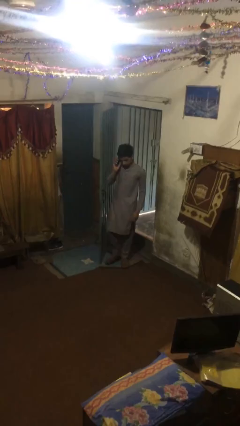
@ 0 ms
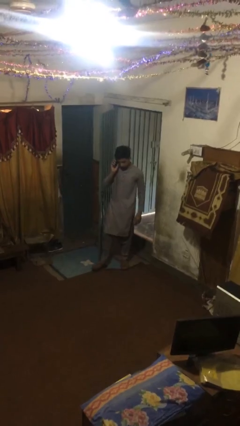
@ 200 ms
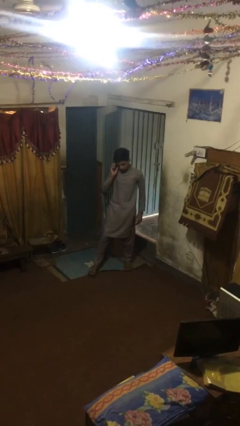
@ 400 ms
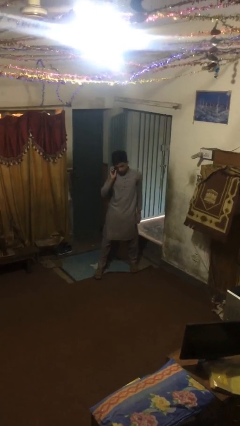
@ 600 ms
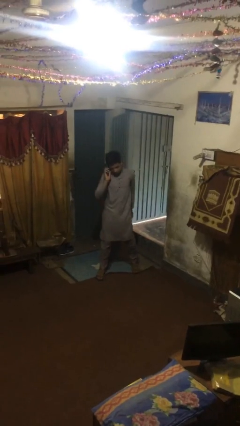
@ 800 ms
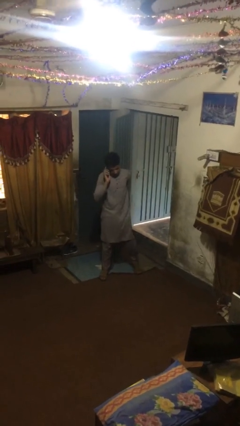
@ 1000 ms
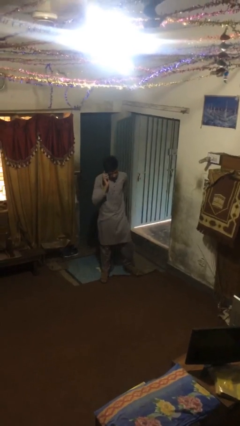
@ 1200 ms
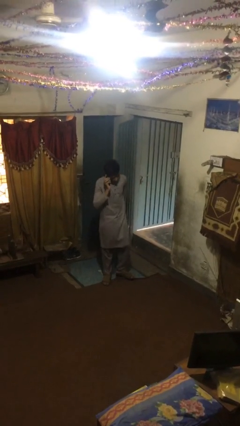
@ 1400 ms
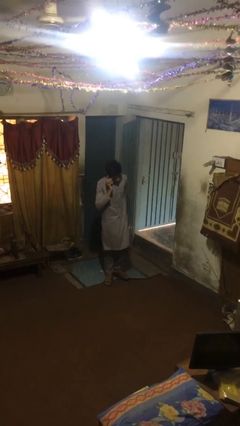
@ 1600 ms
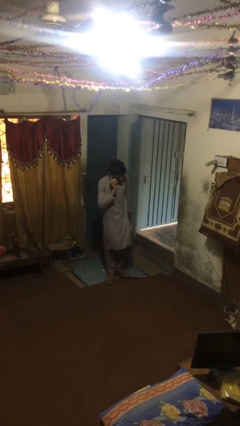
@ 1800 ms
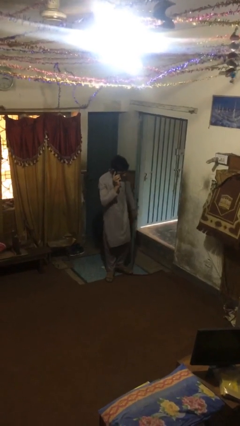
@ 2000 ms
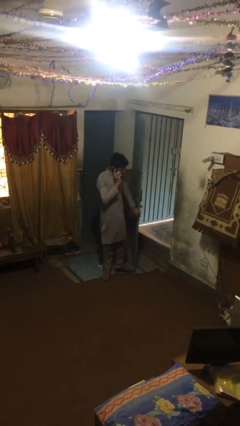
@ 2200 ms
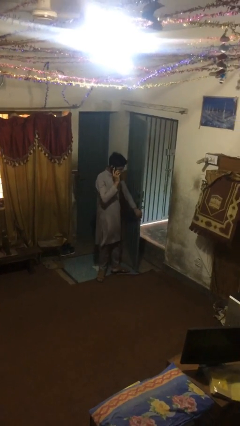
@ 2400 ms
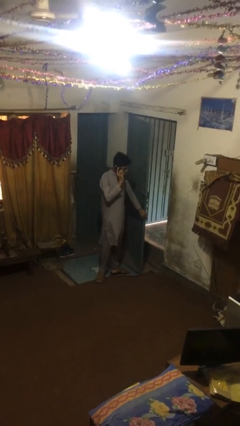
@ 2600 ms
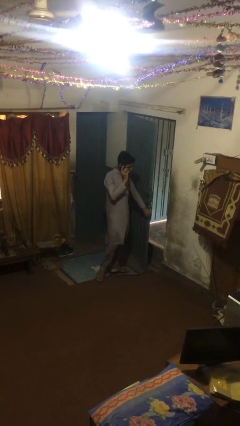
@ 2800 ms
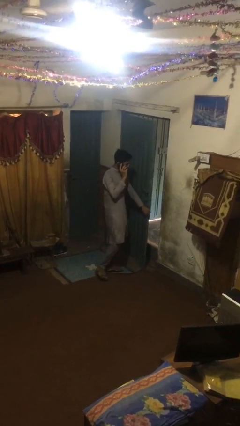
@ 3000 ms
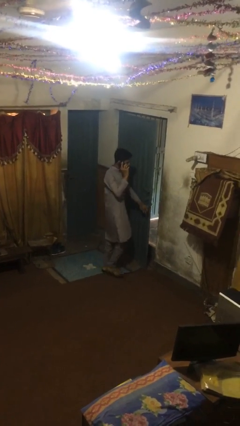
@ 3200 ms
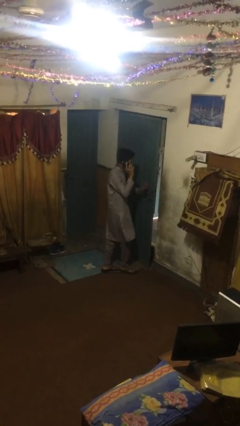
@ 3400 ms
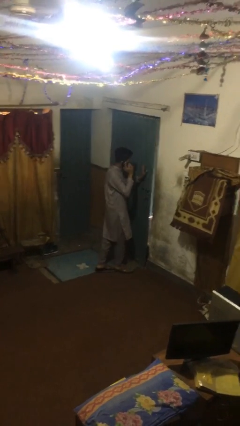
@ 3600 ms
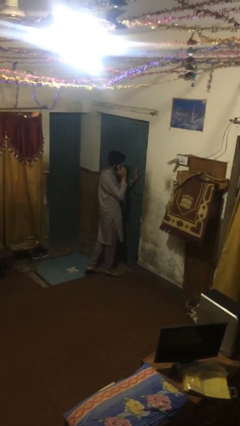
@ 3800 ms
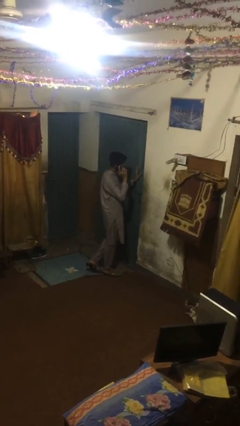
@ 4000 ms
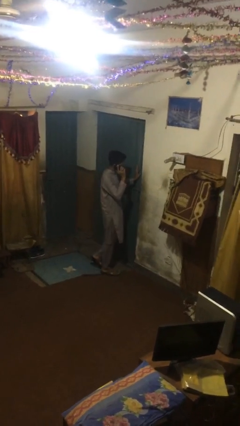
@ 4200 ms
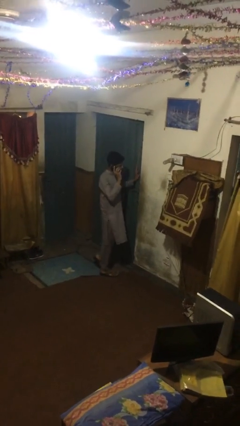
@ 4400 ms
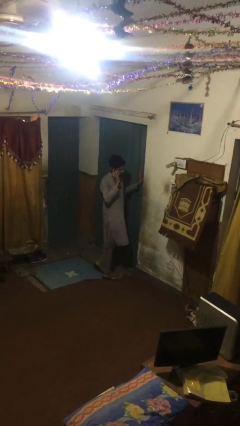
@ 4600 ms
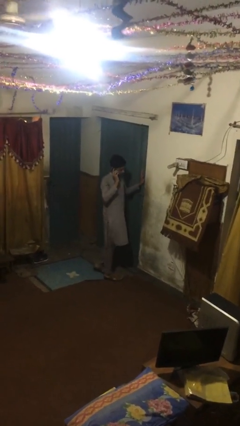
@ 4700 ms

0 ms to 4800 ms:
person closes facility door

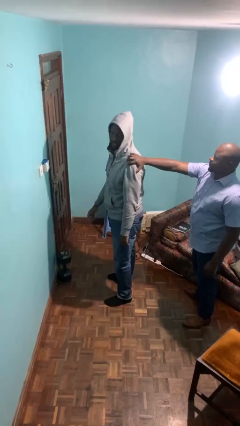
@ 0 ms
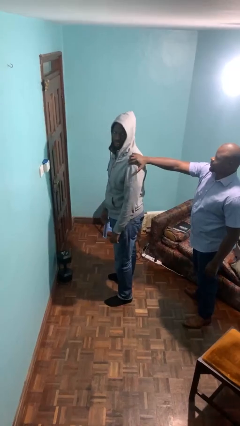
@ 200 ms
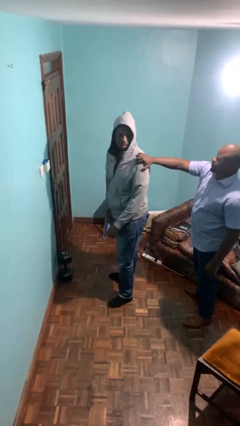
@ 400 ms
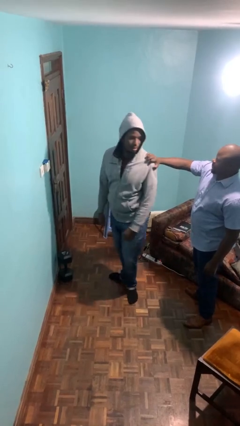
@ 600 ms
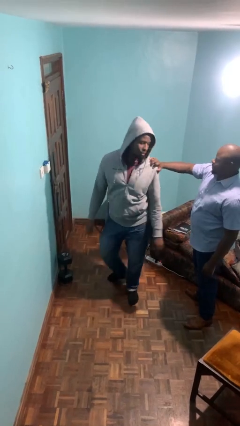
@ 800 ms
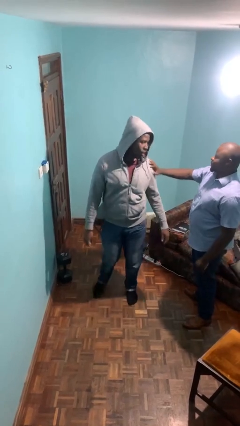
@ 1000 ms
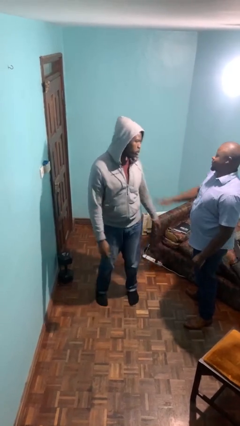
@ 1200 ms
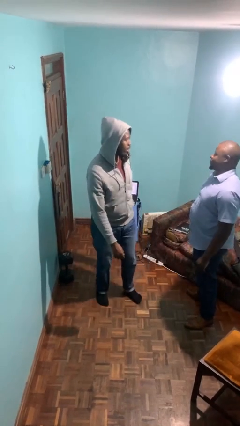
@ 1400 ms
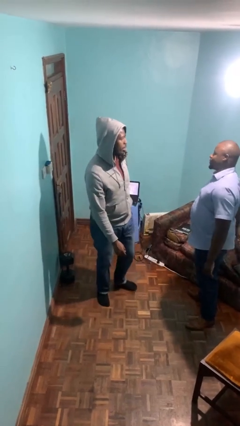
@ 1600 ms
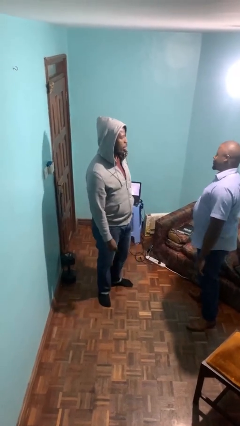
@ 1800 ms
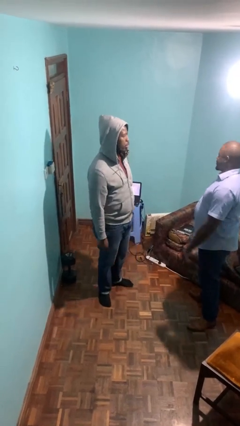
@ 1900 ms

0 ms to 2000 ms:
person spins person around

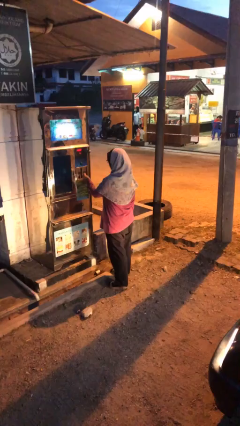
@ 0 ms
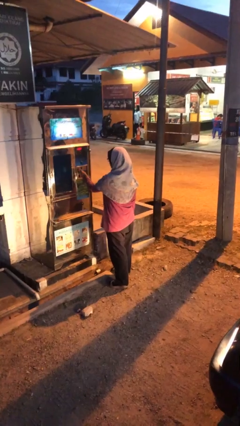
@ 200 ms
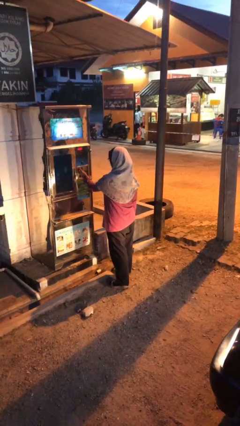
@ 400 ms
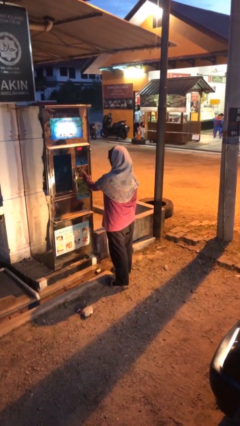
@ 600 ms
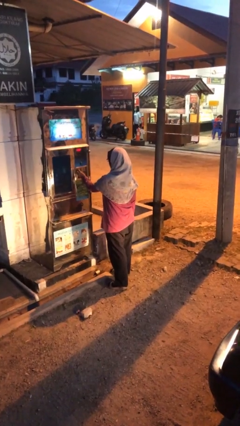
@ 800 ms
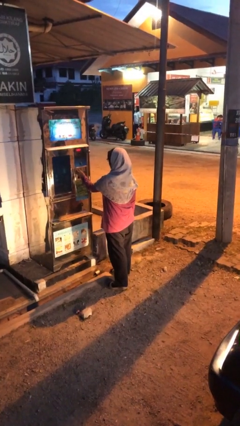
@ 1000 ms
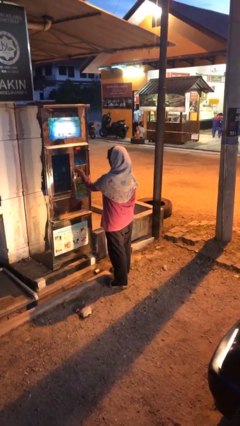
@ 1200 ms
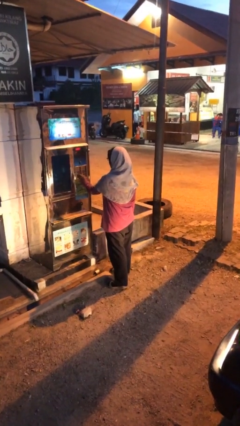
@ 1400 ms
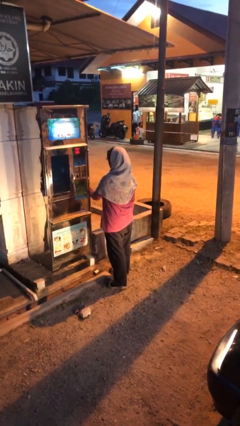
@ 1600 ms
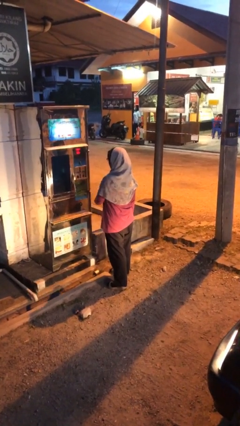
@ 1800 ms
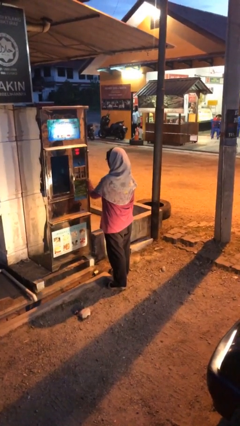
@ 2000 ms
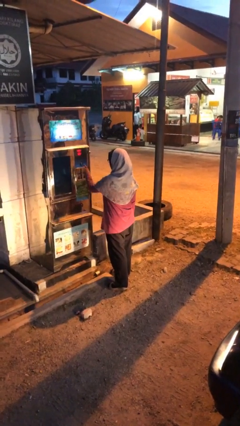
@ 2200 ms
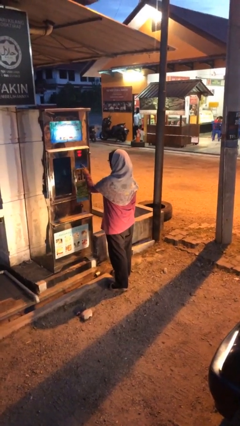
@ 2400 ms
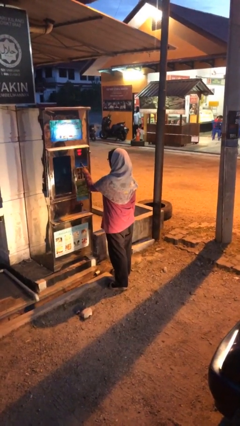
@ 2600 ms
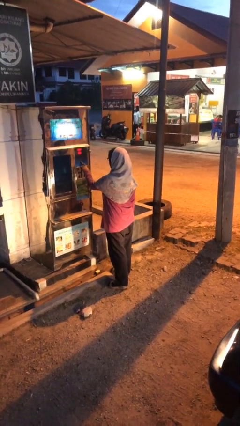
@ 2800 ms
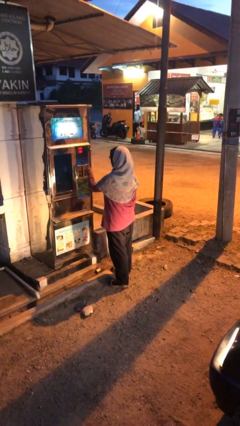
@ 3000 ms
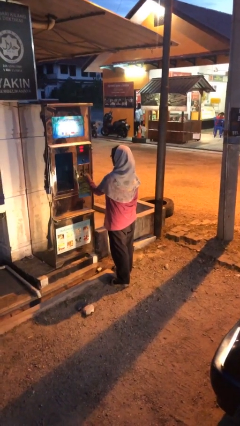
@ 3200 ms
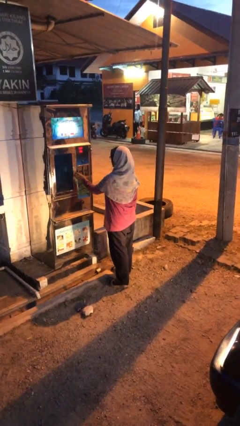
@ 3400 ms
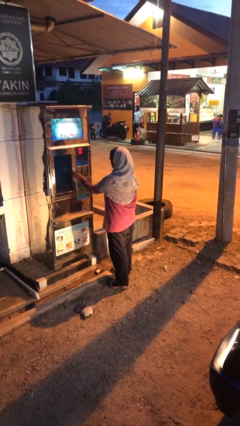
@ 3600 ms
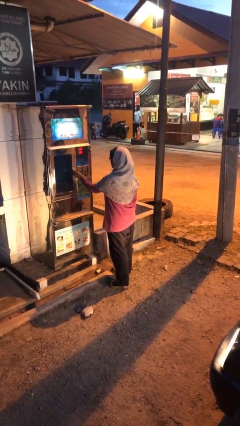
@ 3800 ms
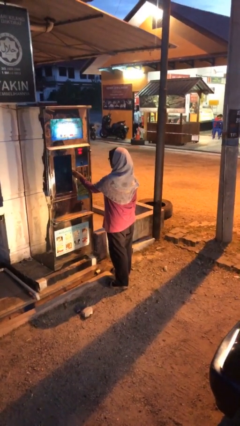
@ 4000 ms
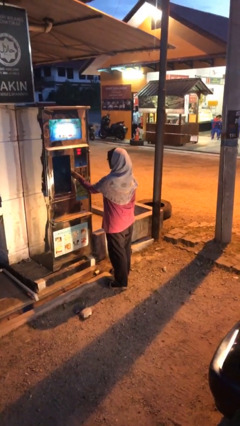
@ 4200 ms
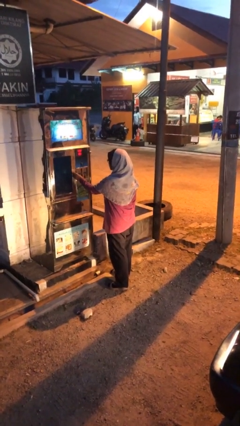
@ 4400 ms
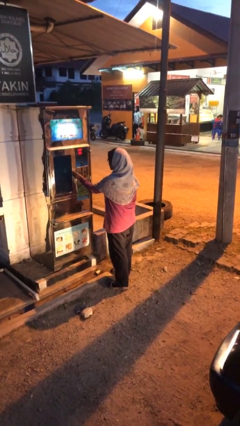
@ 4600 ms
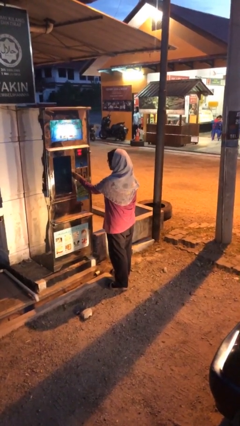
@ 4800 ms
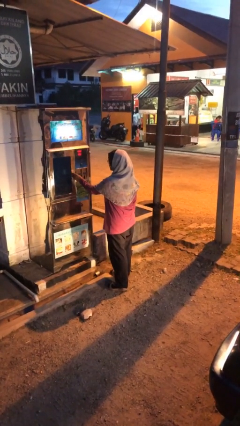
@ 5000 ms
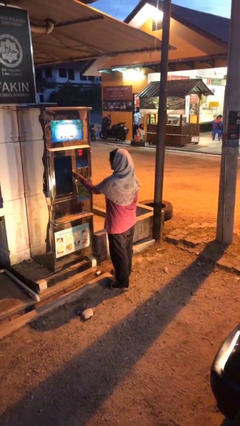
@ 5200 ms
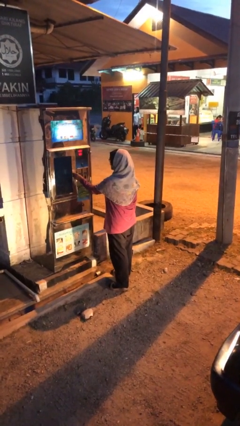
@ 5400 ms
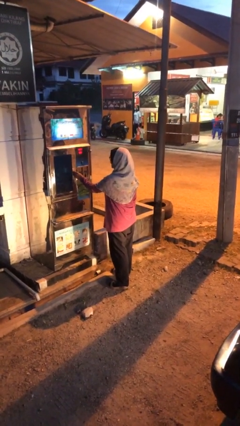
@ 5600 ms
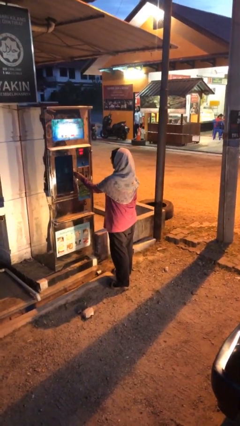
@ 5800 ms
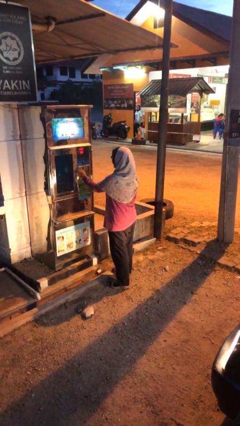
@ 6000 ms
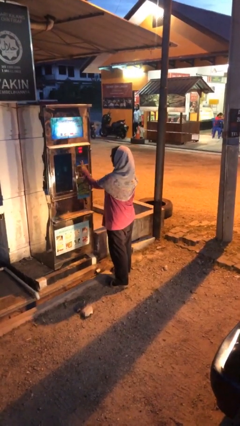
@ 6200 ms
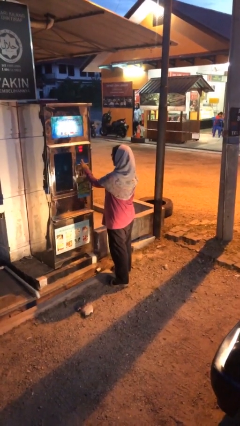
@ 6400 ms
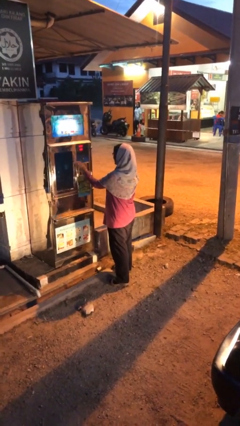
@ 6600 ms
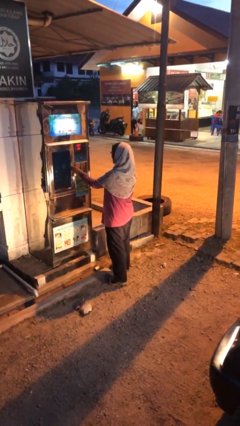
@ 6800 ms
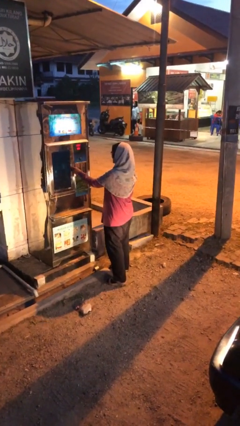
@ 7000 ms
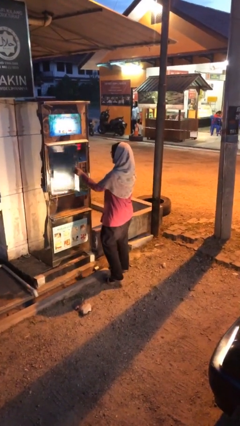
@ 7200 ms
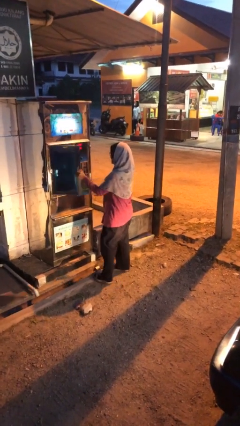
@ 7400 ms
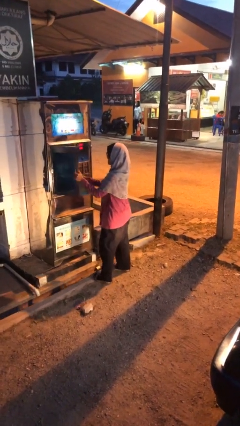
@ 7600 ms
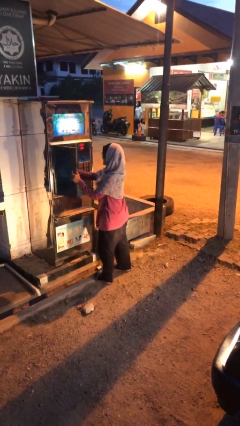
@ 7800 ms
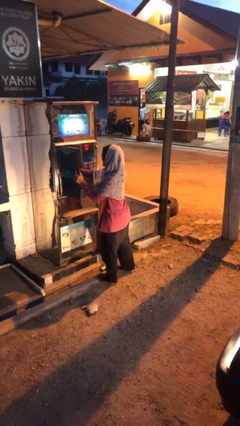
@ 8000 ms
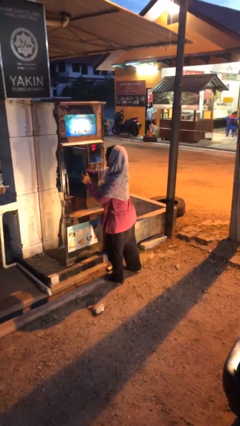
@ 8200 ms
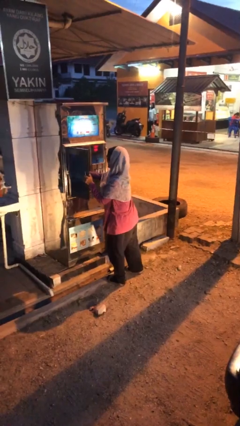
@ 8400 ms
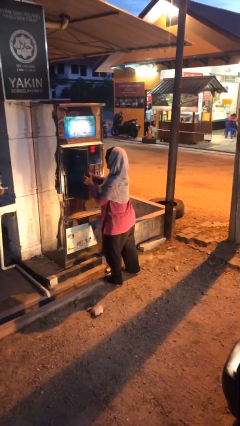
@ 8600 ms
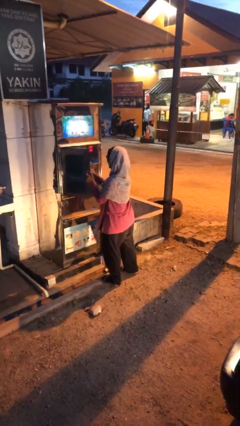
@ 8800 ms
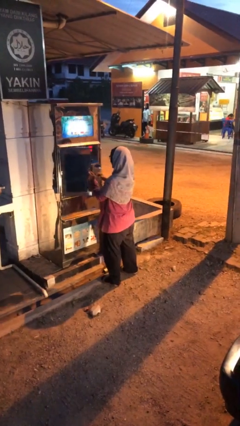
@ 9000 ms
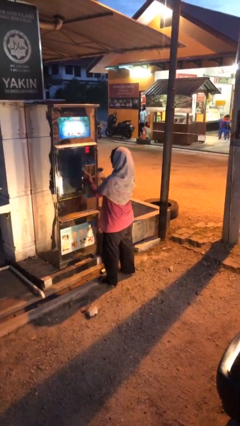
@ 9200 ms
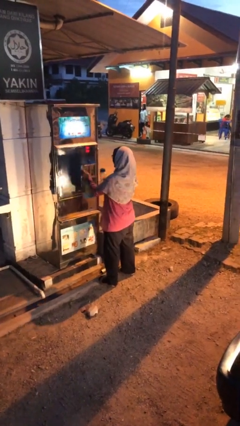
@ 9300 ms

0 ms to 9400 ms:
person purchases from machine

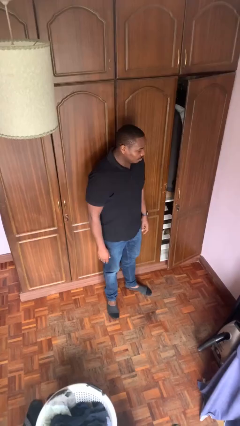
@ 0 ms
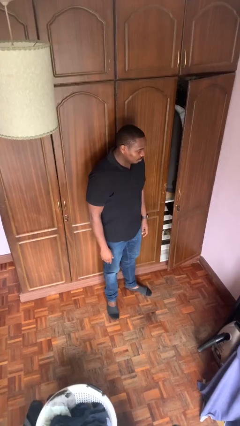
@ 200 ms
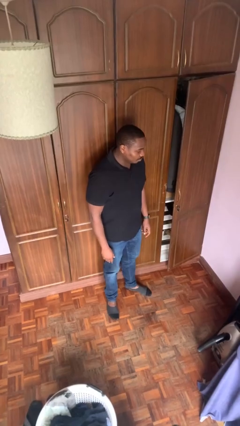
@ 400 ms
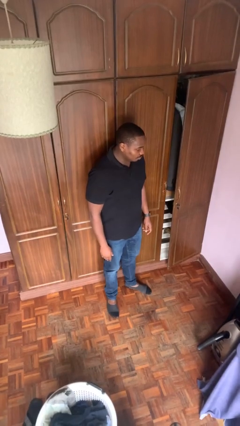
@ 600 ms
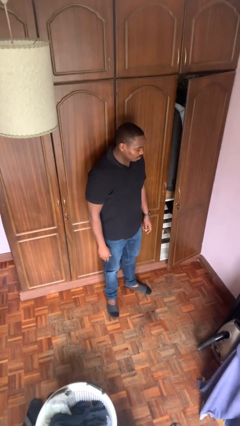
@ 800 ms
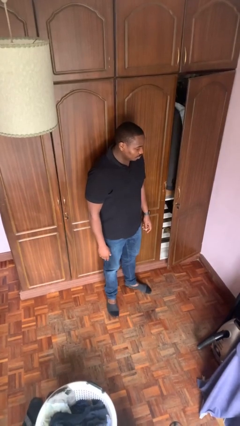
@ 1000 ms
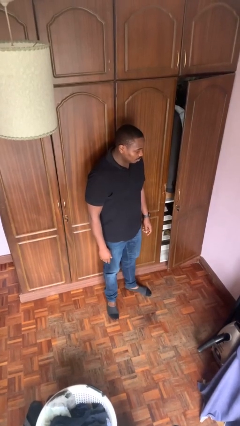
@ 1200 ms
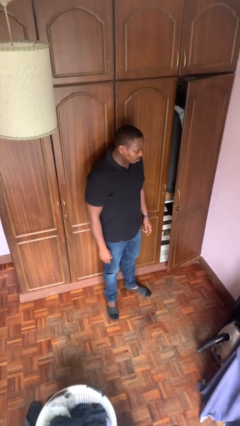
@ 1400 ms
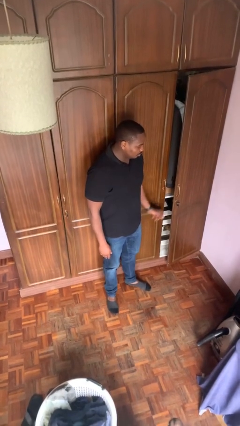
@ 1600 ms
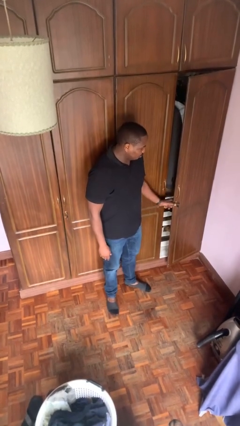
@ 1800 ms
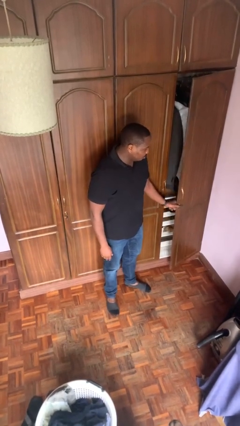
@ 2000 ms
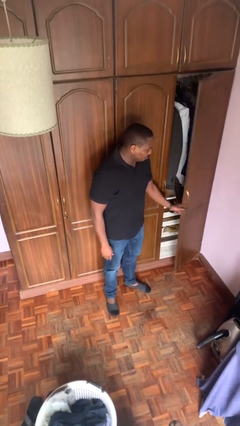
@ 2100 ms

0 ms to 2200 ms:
person closes closet door
